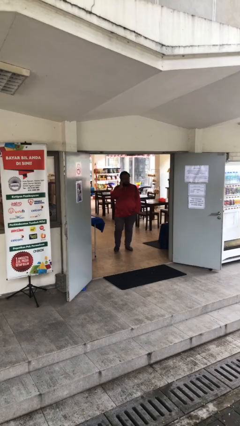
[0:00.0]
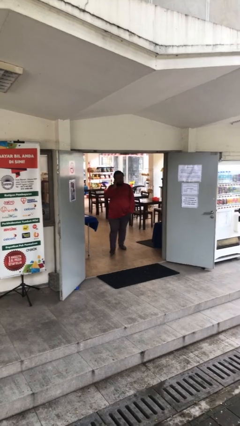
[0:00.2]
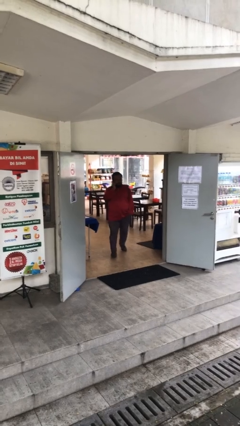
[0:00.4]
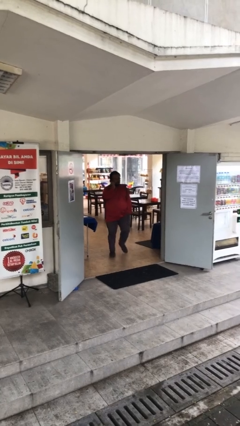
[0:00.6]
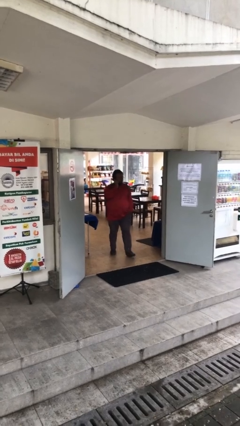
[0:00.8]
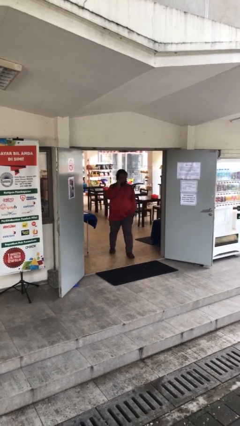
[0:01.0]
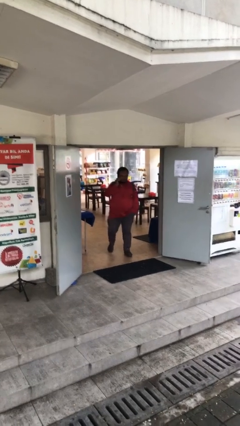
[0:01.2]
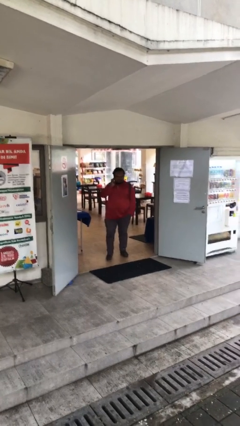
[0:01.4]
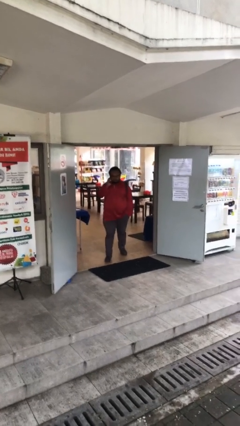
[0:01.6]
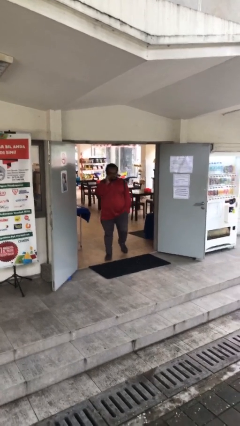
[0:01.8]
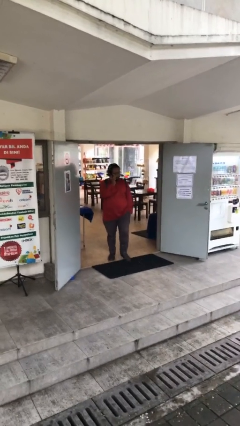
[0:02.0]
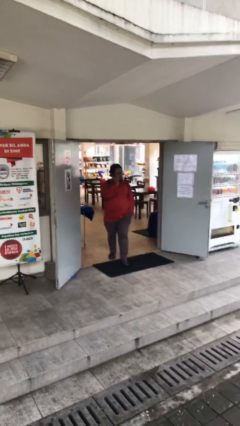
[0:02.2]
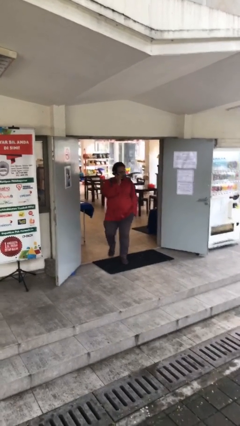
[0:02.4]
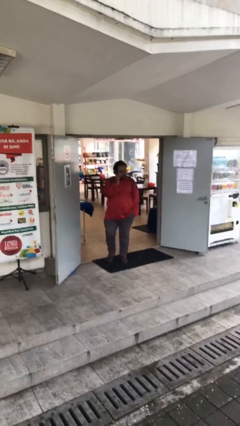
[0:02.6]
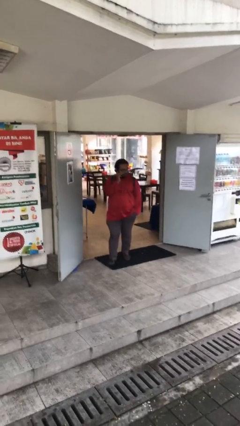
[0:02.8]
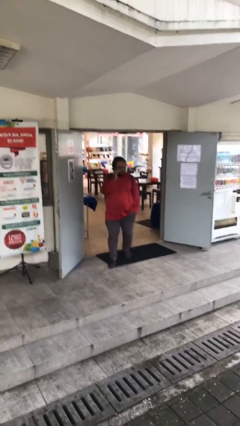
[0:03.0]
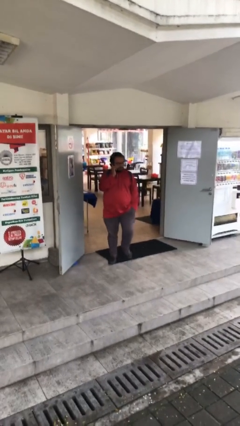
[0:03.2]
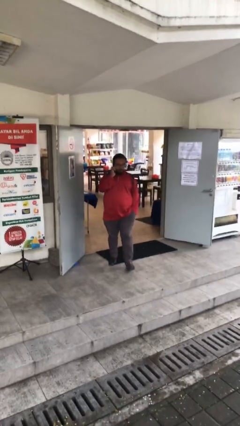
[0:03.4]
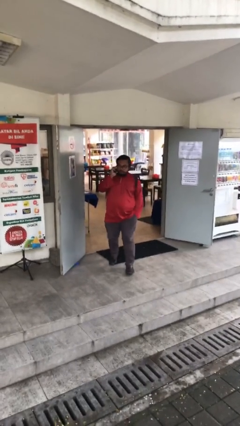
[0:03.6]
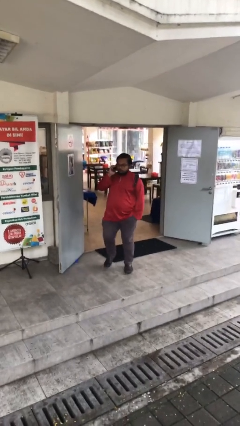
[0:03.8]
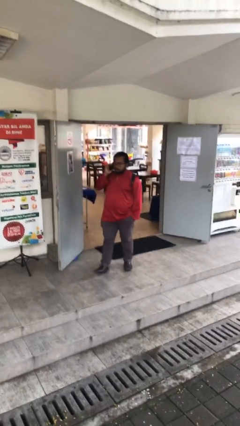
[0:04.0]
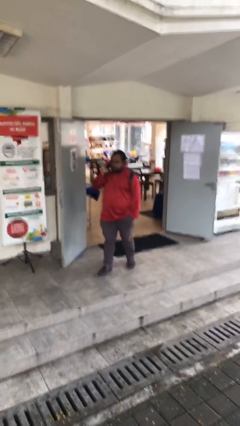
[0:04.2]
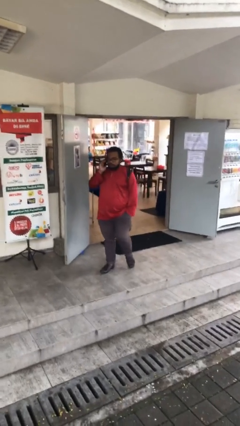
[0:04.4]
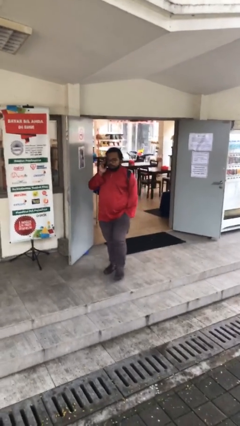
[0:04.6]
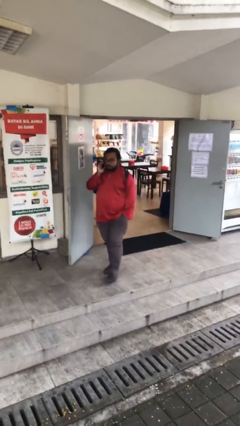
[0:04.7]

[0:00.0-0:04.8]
person enters scene through structure

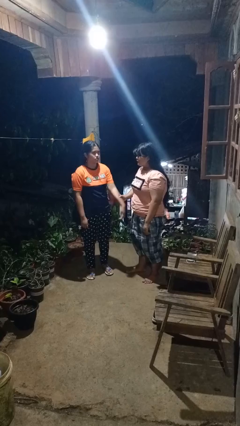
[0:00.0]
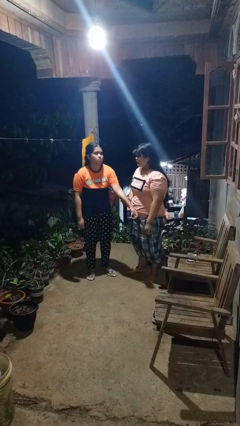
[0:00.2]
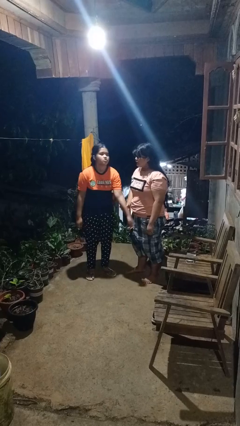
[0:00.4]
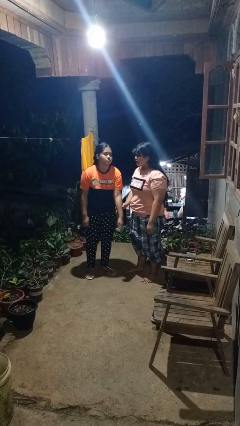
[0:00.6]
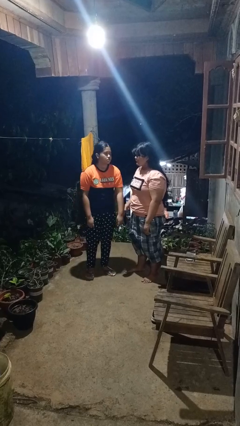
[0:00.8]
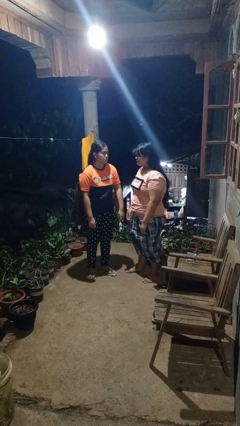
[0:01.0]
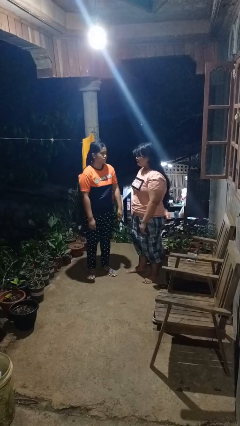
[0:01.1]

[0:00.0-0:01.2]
person grabs person by forearm

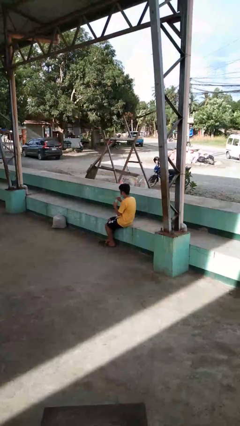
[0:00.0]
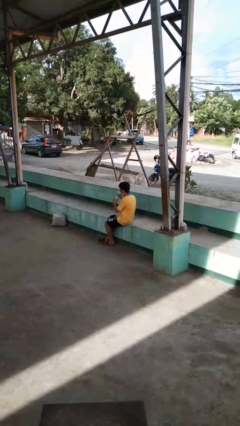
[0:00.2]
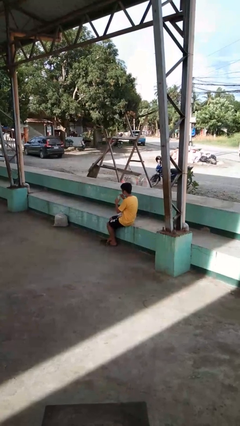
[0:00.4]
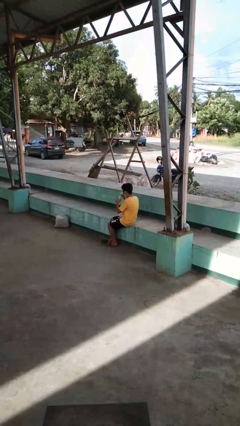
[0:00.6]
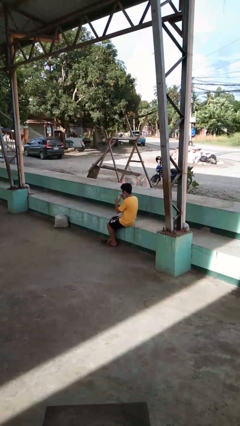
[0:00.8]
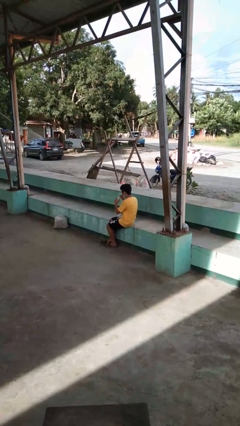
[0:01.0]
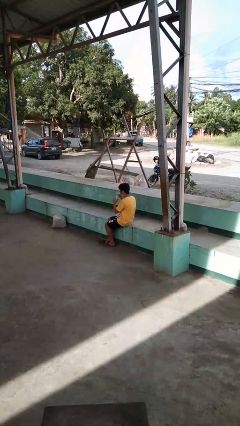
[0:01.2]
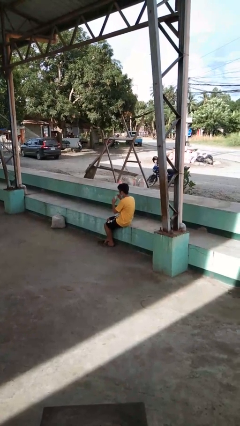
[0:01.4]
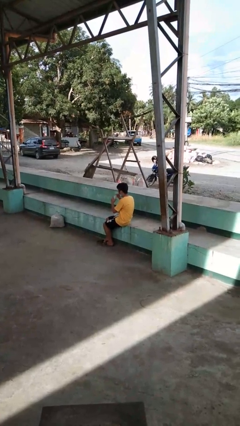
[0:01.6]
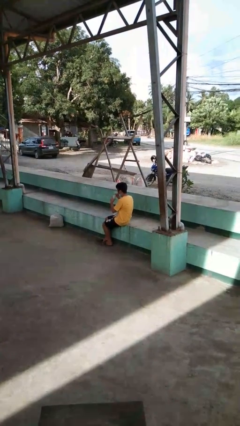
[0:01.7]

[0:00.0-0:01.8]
person drinks from straw

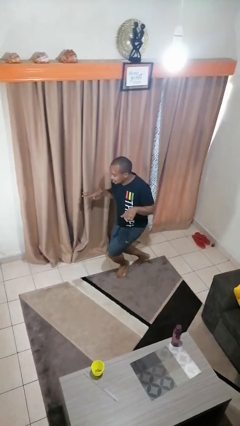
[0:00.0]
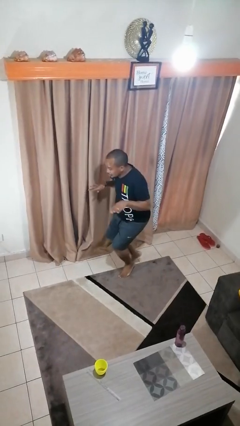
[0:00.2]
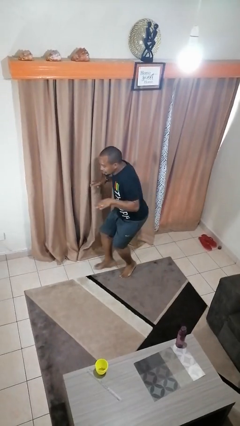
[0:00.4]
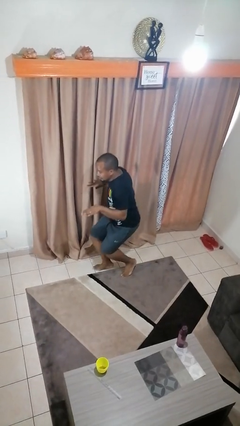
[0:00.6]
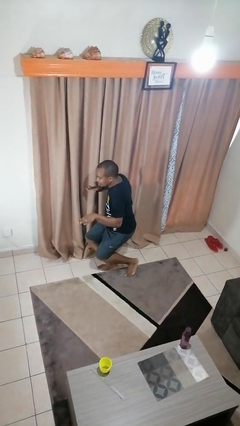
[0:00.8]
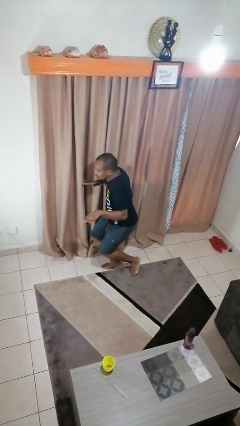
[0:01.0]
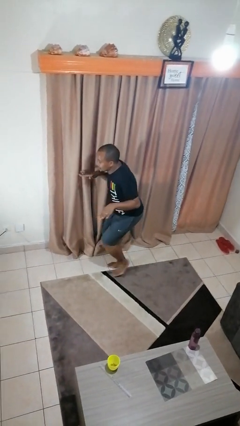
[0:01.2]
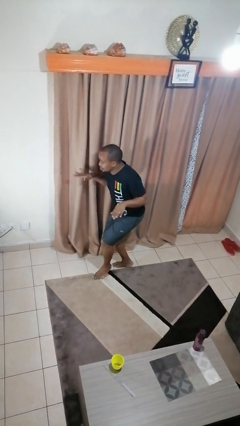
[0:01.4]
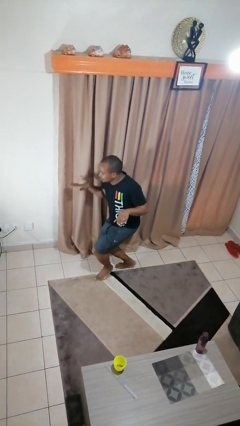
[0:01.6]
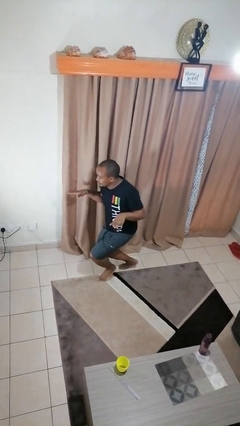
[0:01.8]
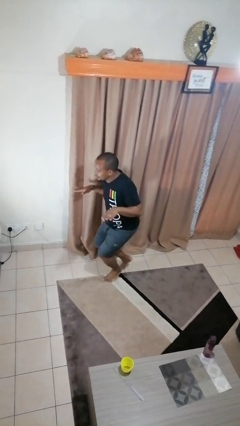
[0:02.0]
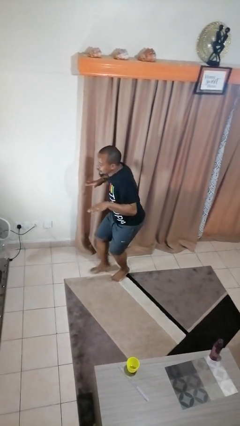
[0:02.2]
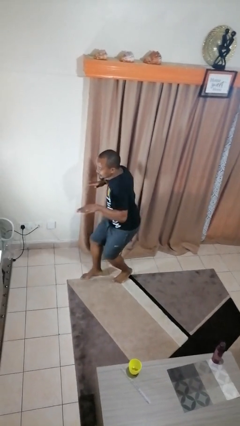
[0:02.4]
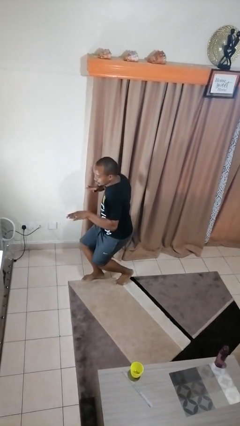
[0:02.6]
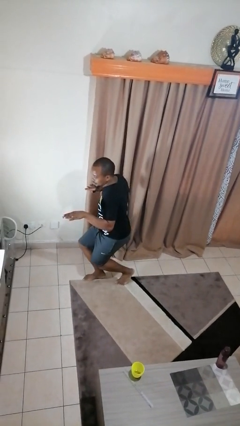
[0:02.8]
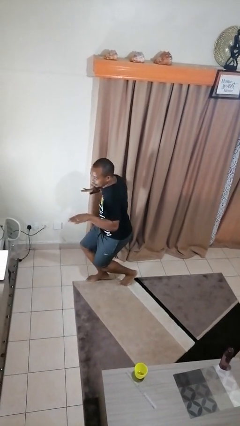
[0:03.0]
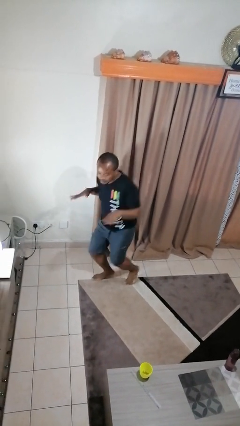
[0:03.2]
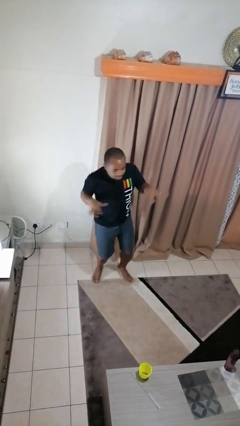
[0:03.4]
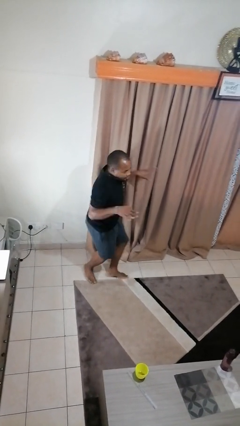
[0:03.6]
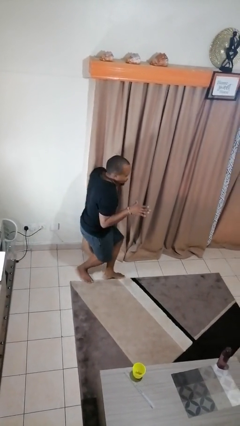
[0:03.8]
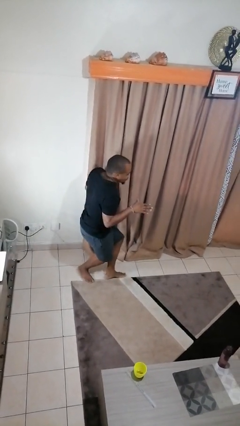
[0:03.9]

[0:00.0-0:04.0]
person picks up object from floor

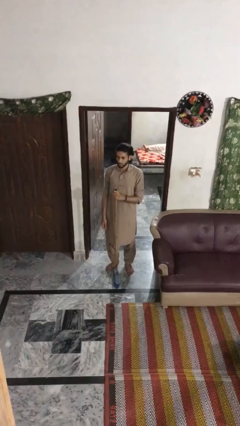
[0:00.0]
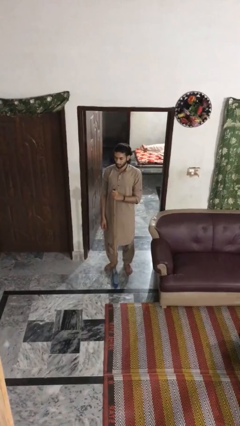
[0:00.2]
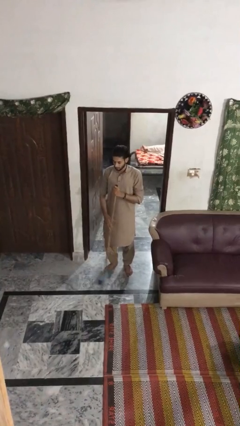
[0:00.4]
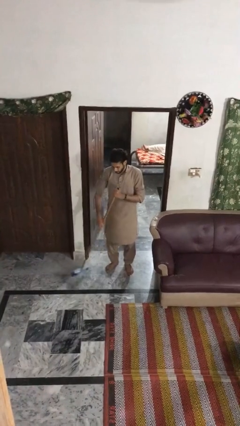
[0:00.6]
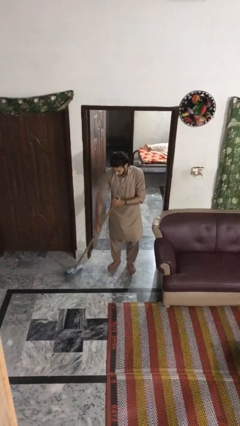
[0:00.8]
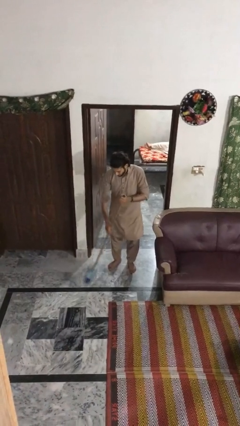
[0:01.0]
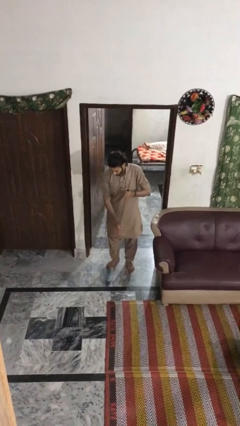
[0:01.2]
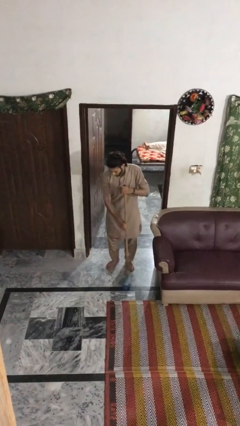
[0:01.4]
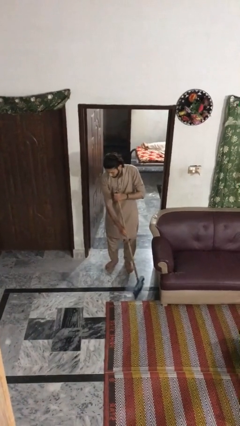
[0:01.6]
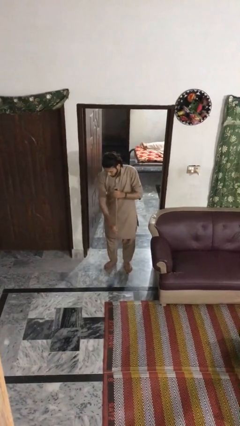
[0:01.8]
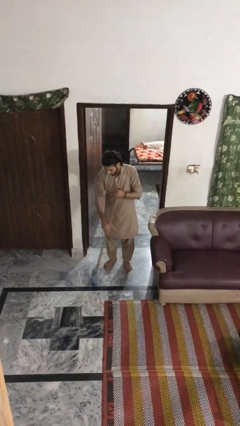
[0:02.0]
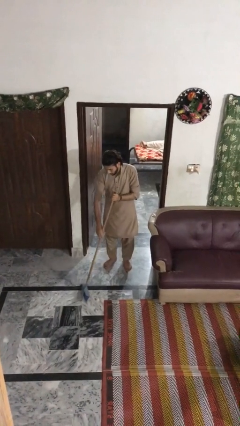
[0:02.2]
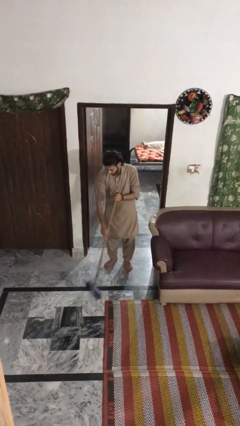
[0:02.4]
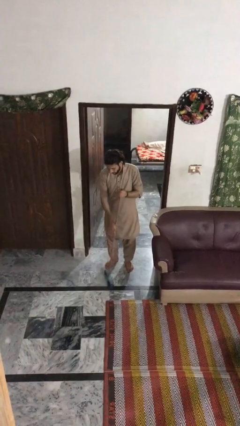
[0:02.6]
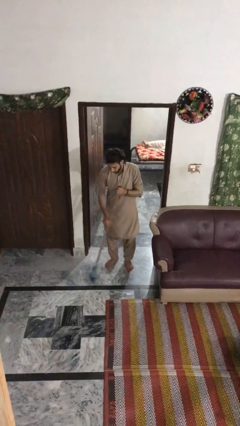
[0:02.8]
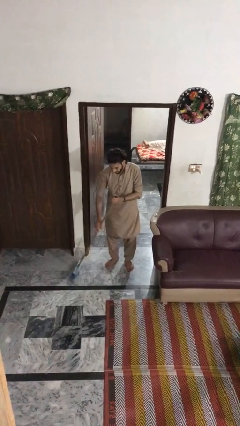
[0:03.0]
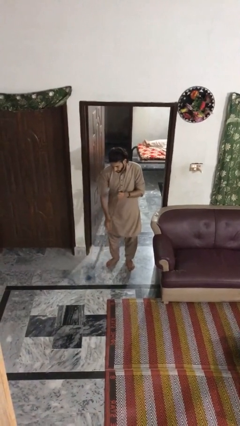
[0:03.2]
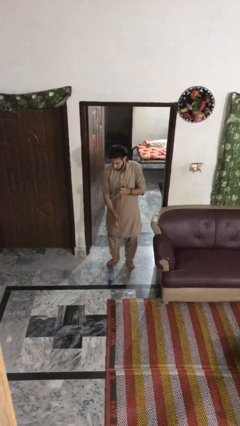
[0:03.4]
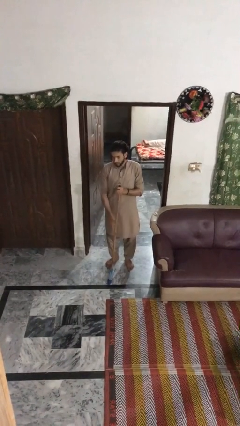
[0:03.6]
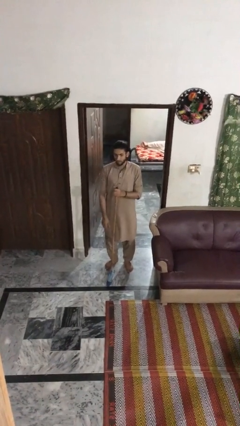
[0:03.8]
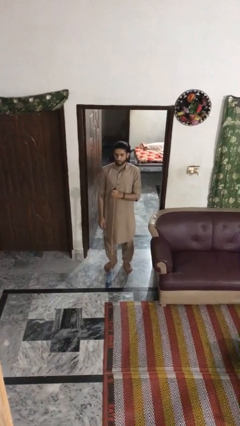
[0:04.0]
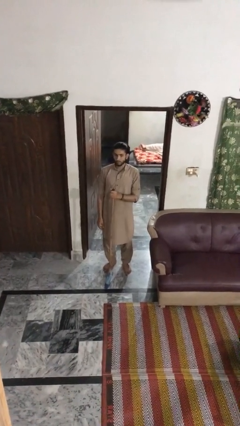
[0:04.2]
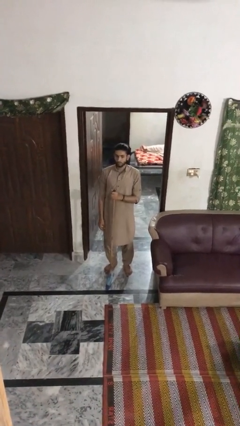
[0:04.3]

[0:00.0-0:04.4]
person sweeps floor

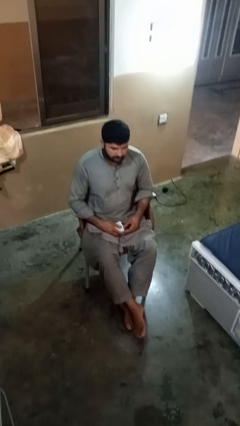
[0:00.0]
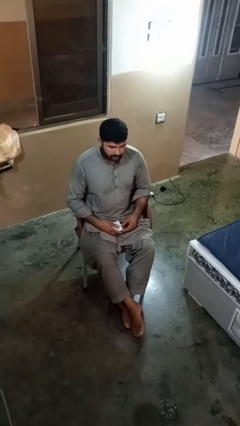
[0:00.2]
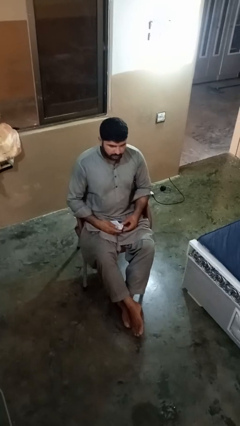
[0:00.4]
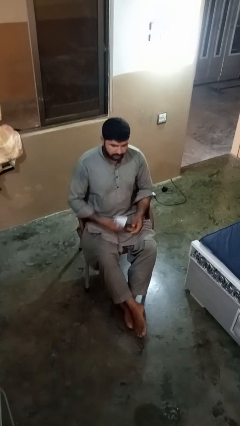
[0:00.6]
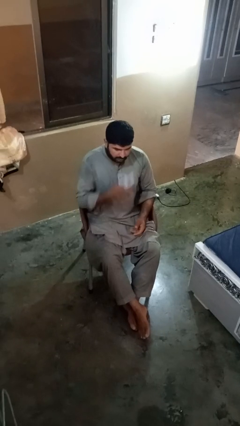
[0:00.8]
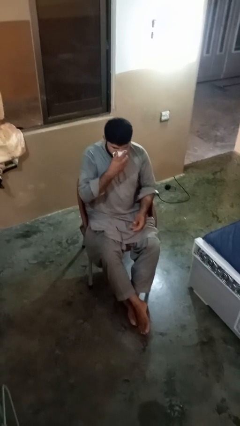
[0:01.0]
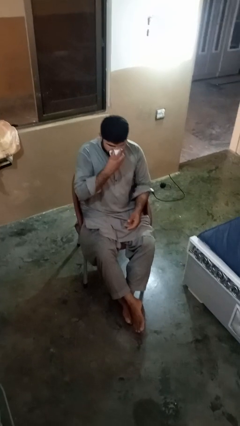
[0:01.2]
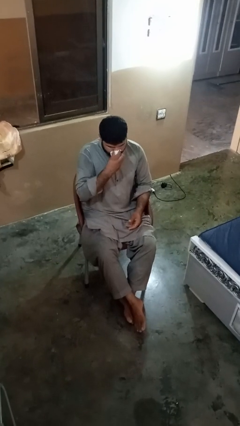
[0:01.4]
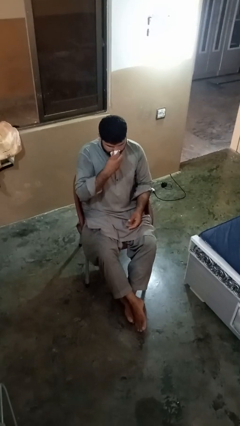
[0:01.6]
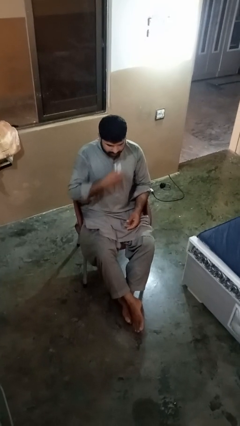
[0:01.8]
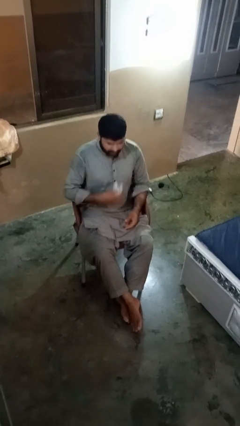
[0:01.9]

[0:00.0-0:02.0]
person blows nose
